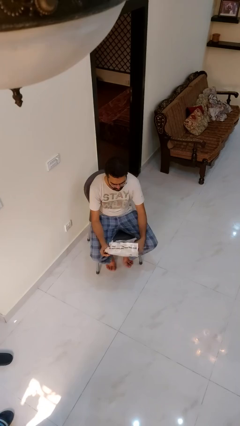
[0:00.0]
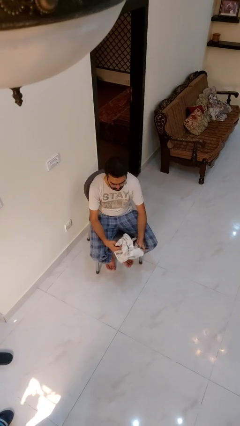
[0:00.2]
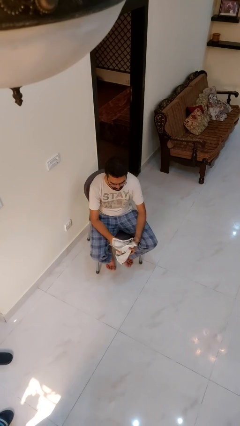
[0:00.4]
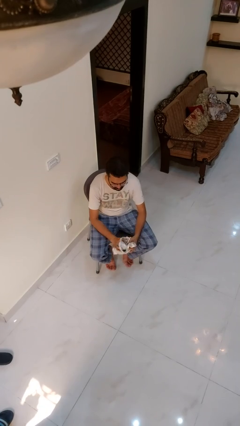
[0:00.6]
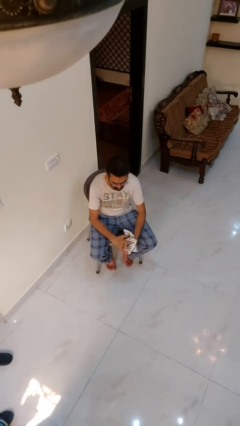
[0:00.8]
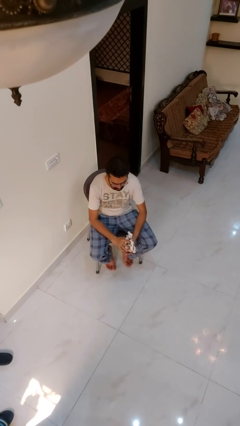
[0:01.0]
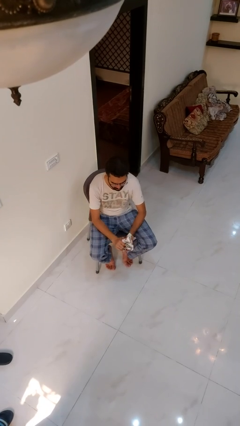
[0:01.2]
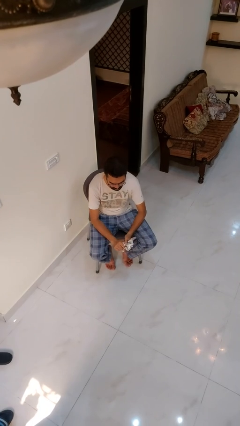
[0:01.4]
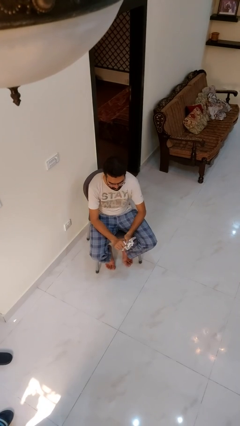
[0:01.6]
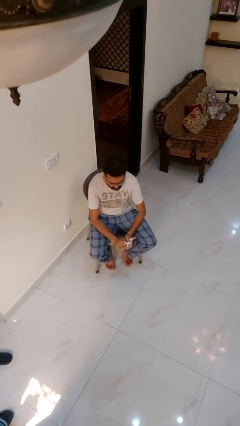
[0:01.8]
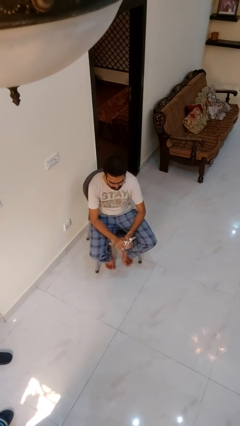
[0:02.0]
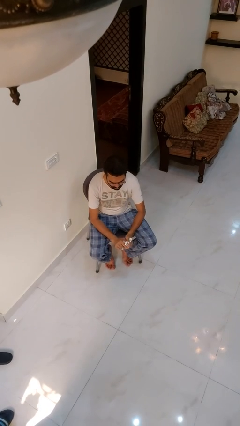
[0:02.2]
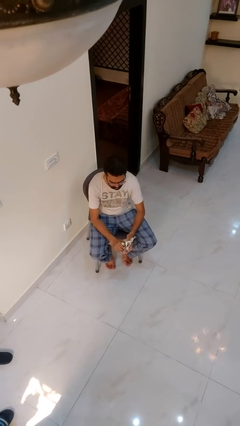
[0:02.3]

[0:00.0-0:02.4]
person crumples paper

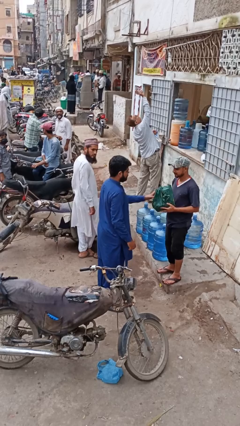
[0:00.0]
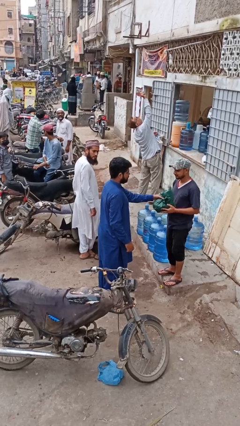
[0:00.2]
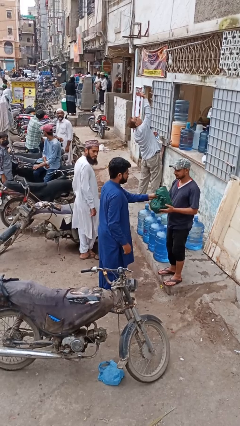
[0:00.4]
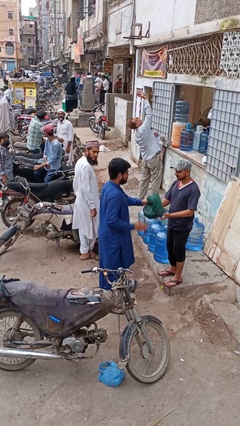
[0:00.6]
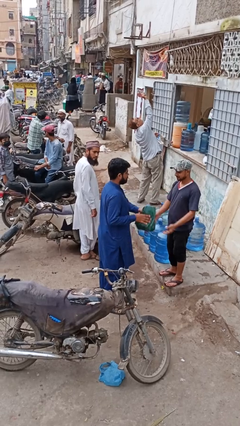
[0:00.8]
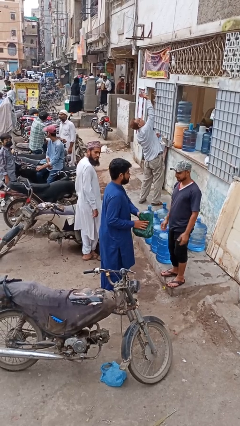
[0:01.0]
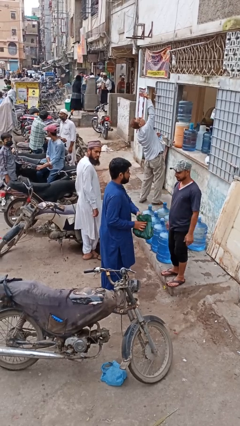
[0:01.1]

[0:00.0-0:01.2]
person transfers object to person

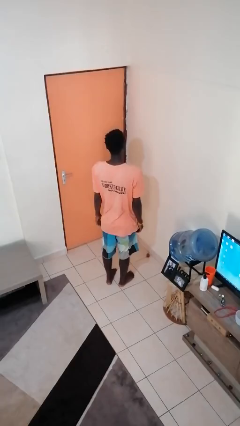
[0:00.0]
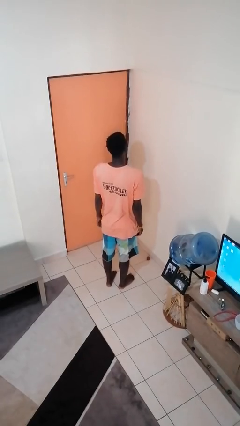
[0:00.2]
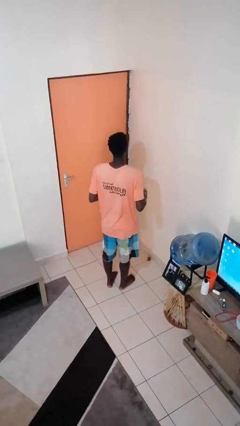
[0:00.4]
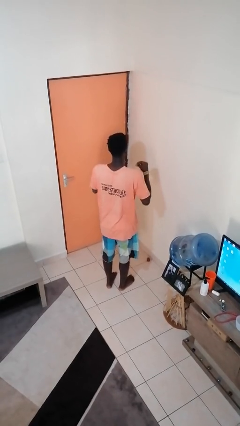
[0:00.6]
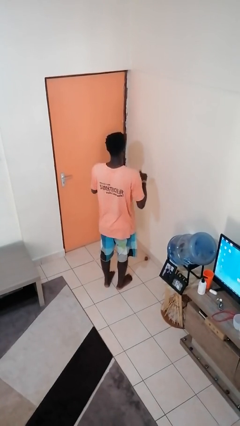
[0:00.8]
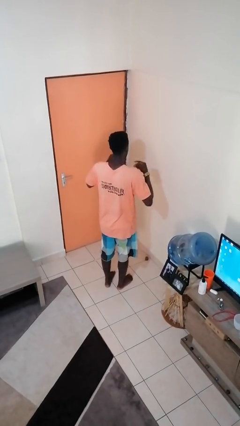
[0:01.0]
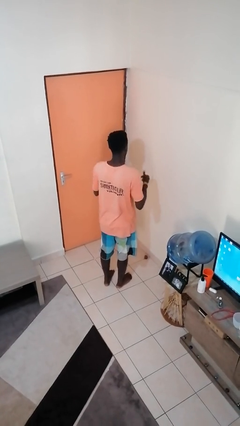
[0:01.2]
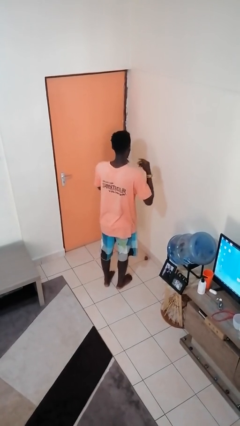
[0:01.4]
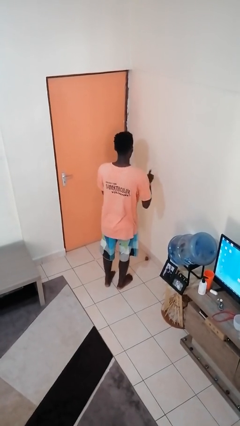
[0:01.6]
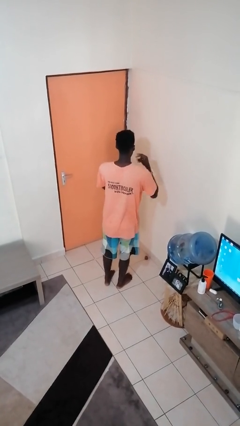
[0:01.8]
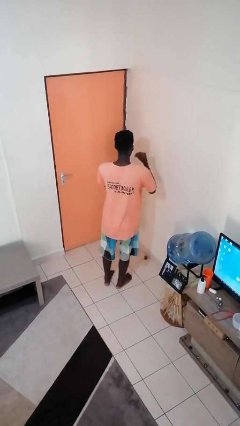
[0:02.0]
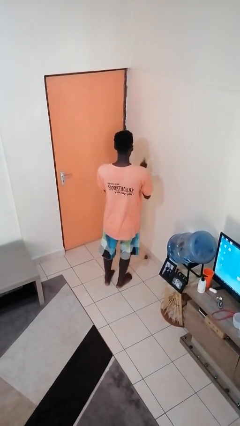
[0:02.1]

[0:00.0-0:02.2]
person snaps fingers

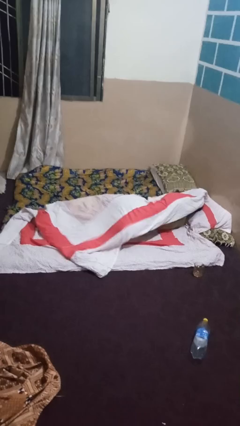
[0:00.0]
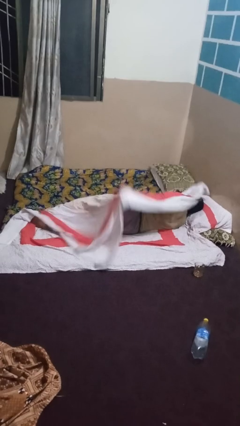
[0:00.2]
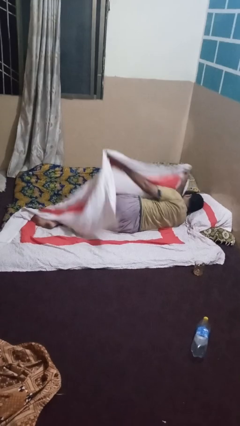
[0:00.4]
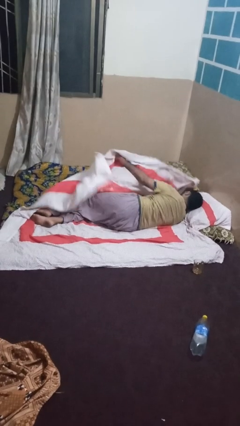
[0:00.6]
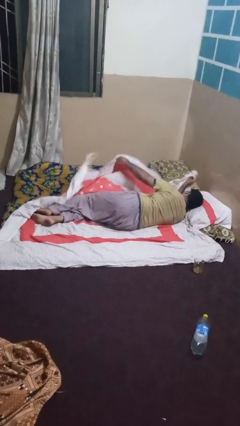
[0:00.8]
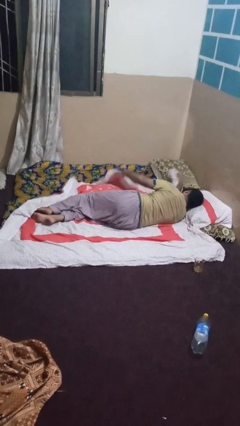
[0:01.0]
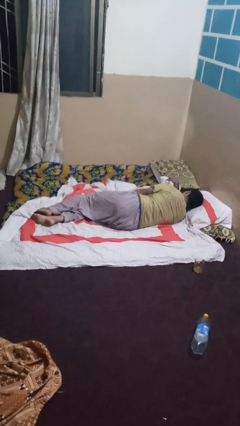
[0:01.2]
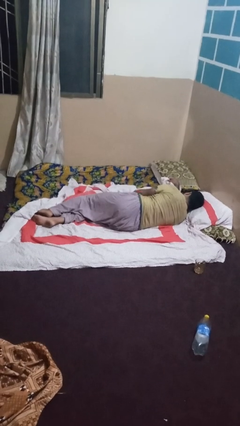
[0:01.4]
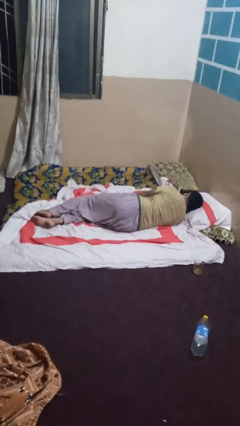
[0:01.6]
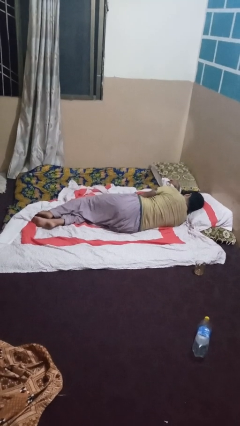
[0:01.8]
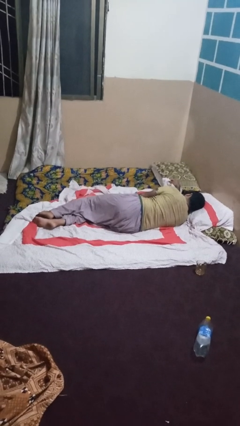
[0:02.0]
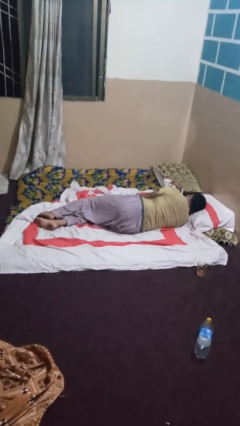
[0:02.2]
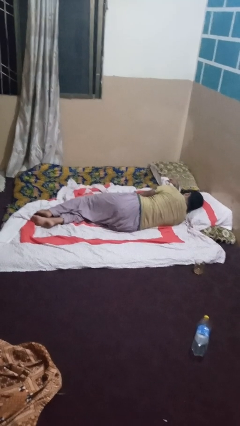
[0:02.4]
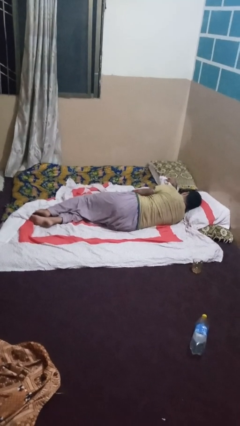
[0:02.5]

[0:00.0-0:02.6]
person uncovers with bedsheets

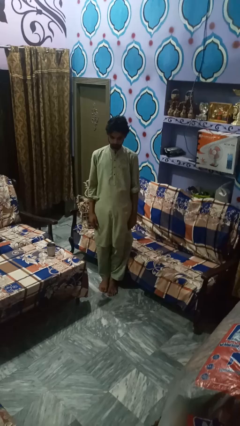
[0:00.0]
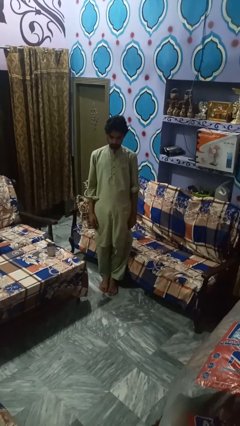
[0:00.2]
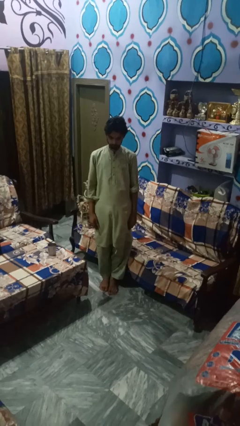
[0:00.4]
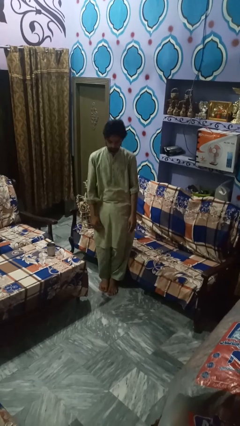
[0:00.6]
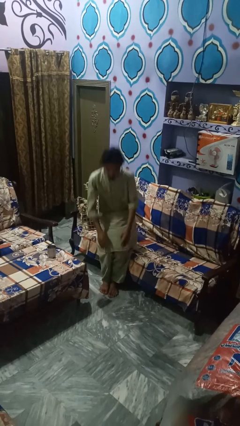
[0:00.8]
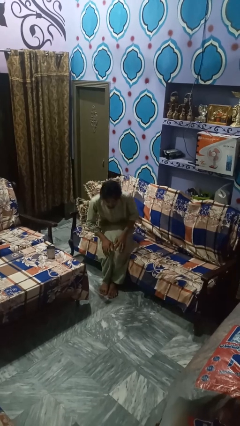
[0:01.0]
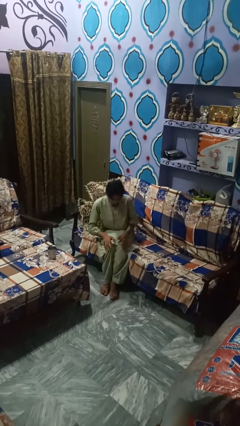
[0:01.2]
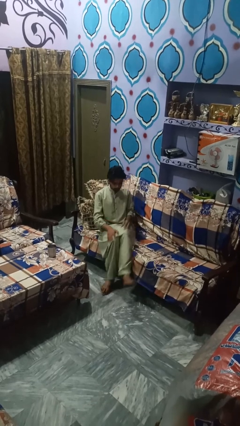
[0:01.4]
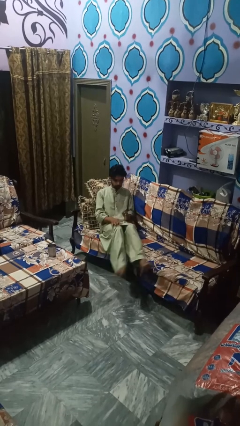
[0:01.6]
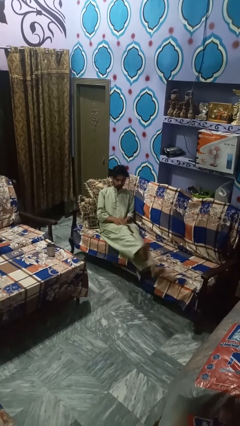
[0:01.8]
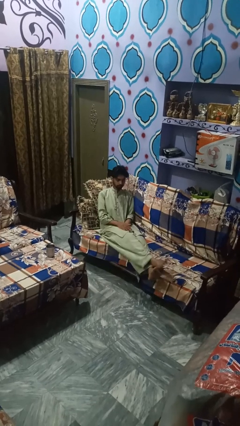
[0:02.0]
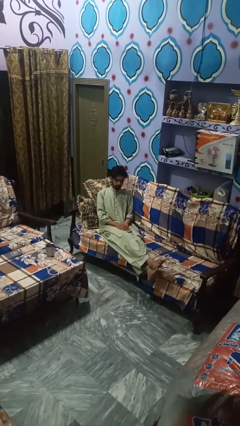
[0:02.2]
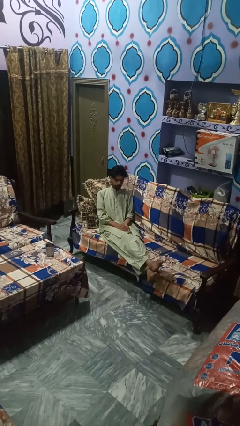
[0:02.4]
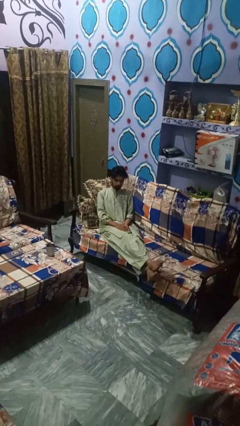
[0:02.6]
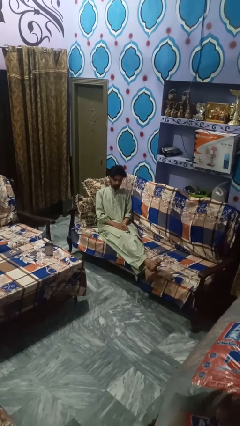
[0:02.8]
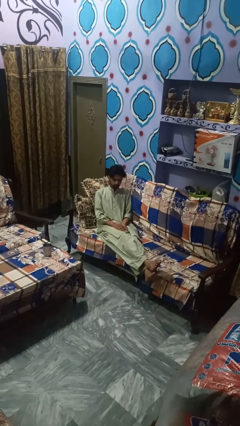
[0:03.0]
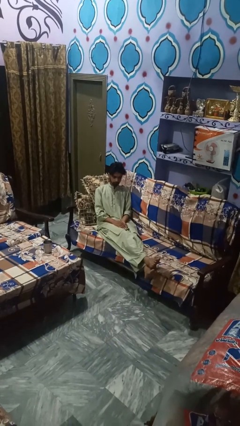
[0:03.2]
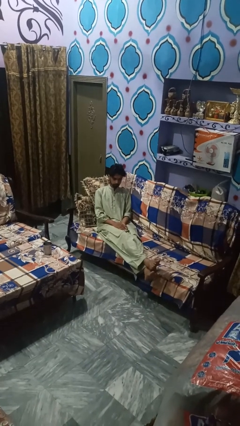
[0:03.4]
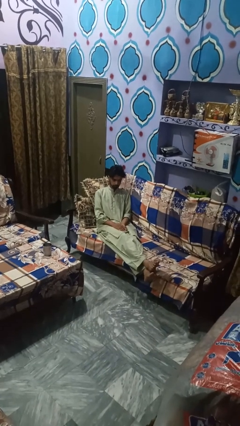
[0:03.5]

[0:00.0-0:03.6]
person lies down on couch

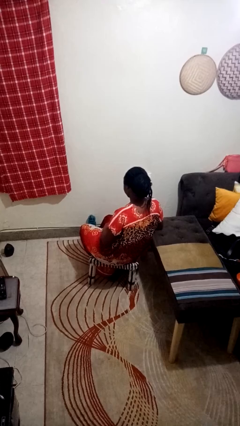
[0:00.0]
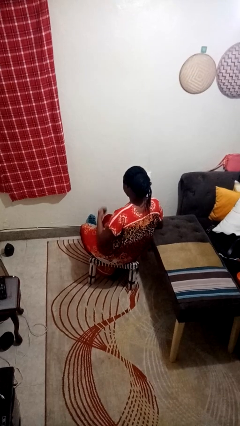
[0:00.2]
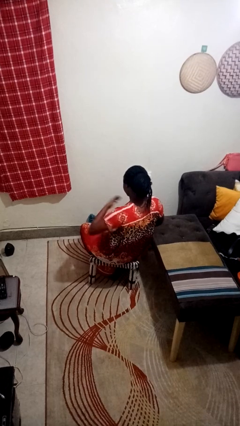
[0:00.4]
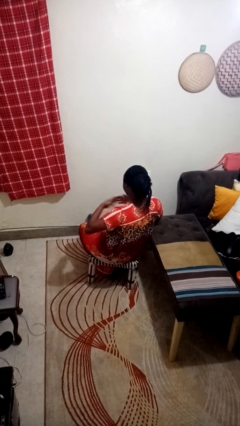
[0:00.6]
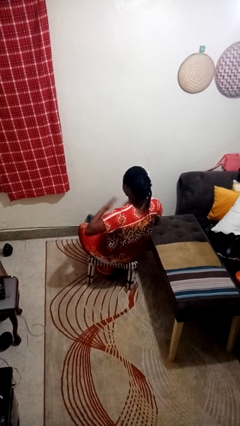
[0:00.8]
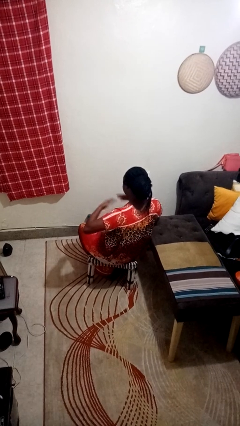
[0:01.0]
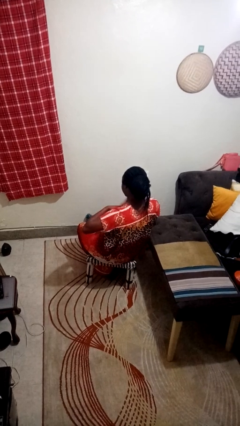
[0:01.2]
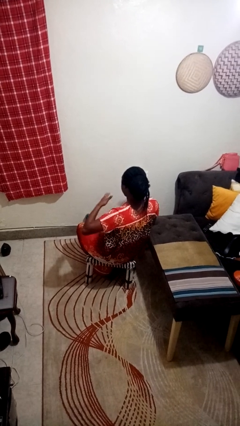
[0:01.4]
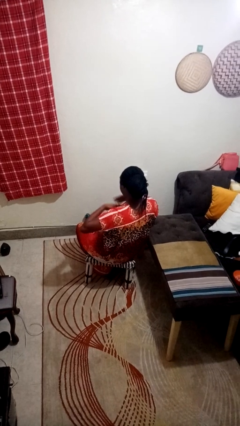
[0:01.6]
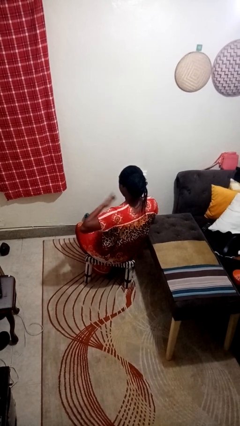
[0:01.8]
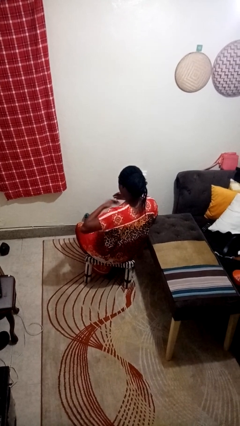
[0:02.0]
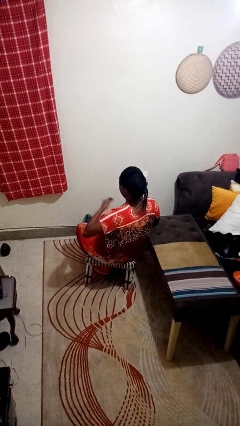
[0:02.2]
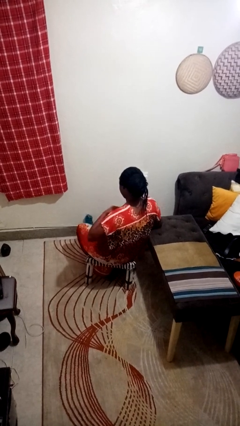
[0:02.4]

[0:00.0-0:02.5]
person drums on chest

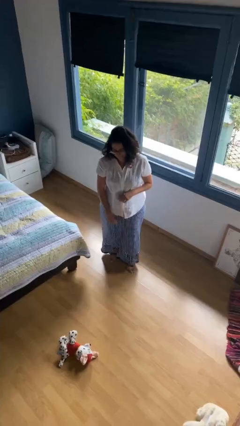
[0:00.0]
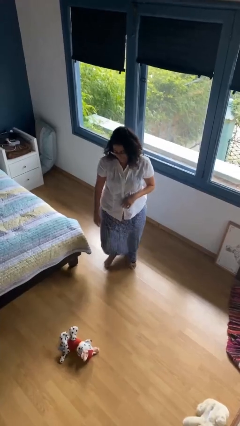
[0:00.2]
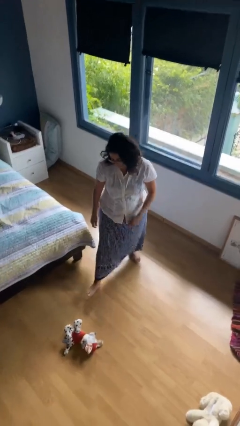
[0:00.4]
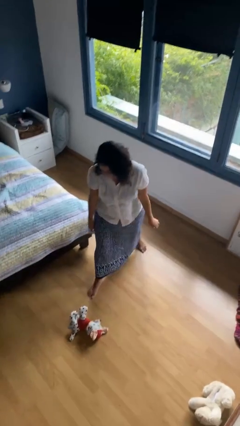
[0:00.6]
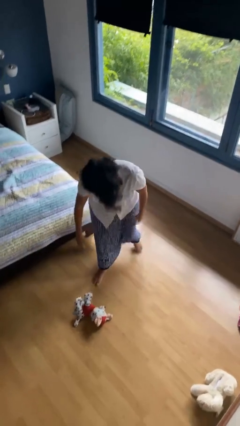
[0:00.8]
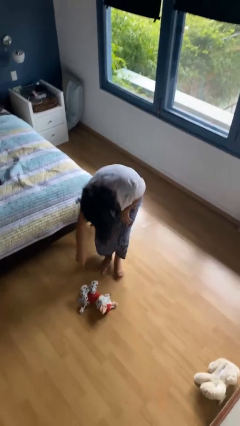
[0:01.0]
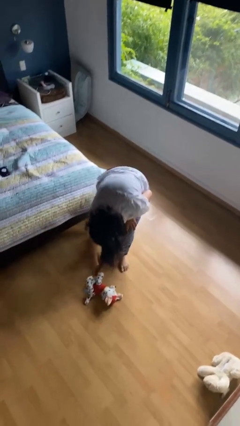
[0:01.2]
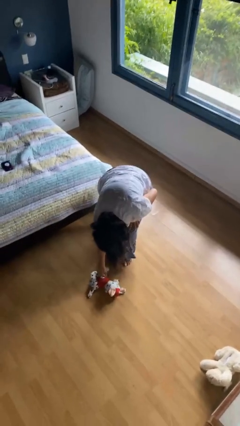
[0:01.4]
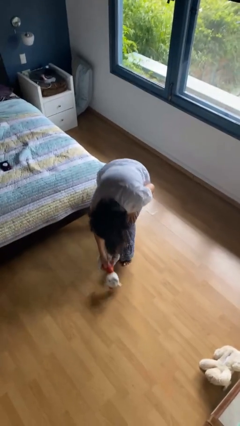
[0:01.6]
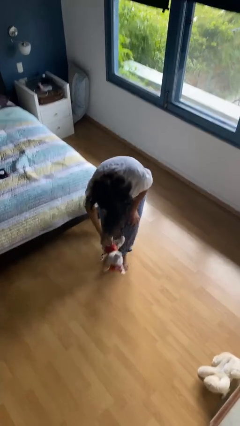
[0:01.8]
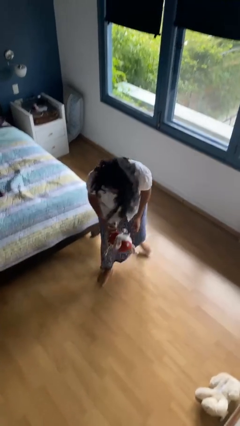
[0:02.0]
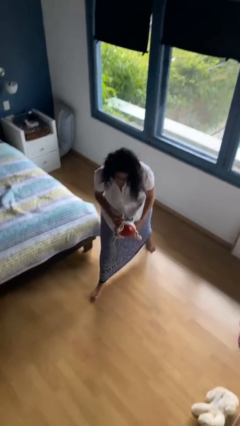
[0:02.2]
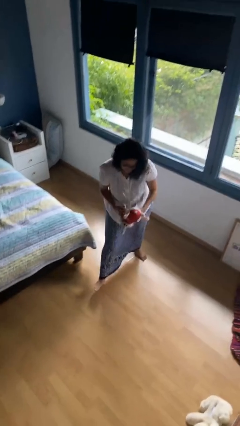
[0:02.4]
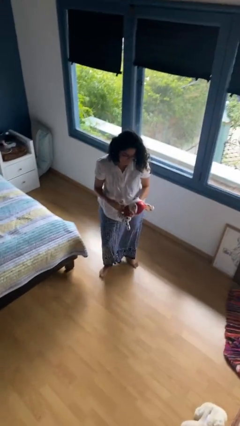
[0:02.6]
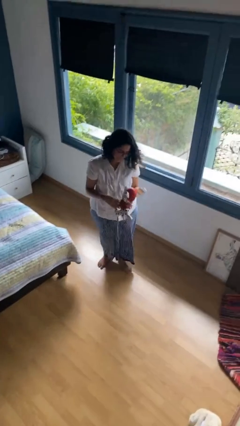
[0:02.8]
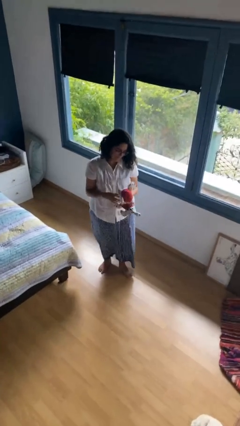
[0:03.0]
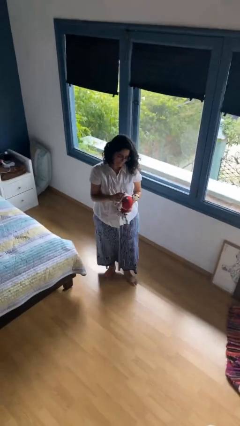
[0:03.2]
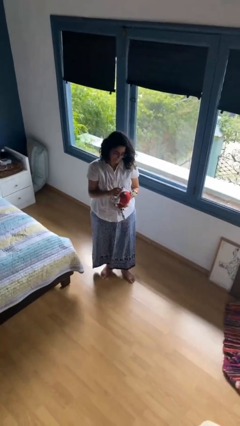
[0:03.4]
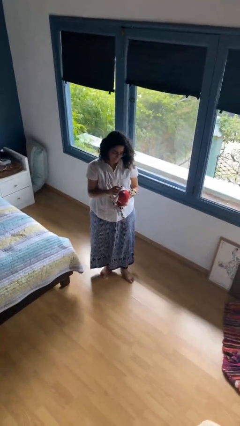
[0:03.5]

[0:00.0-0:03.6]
person picks up object from floor
